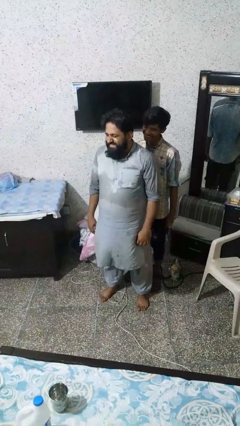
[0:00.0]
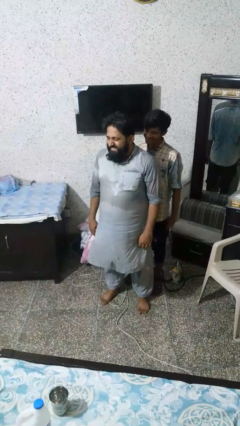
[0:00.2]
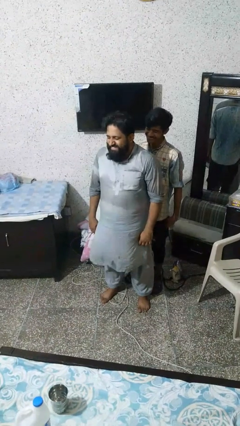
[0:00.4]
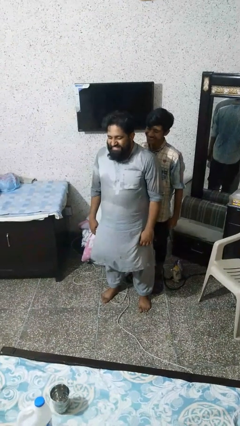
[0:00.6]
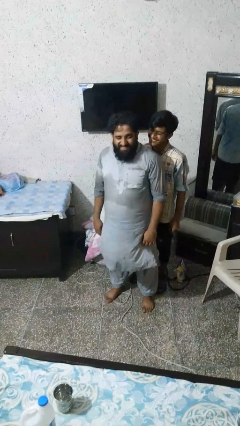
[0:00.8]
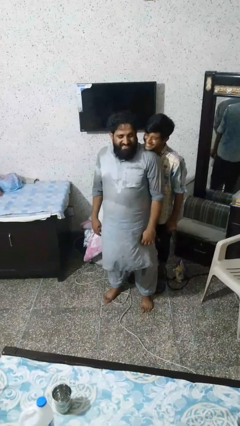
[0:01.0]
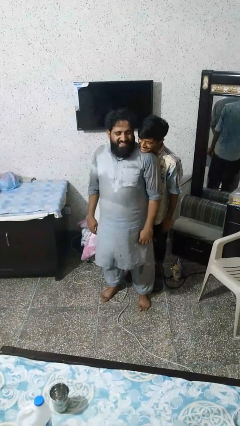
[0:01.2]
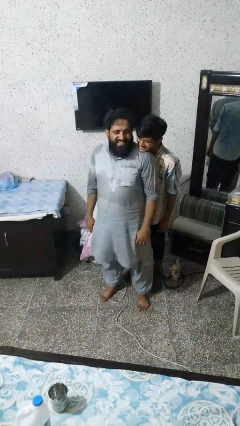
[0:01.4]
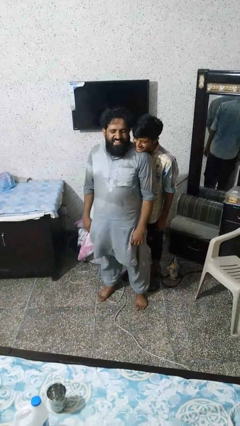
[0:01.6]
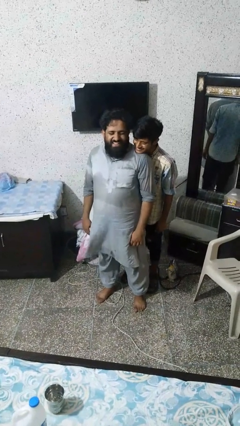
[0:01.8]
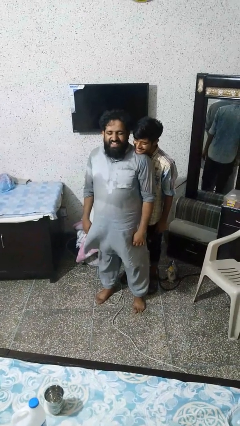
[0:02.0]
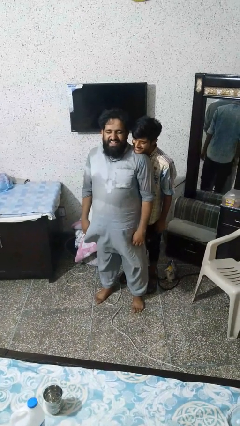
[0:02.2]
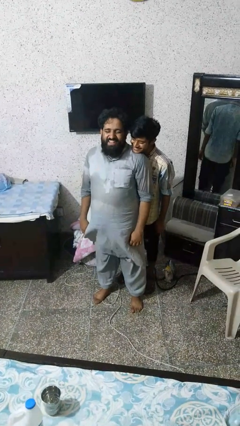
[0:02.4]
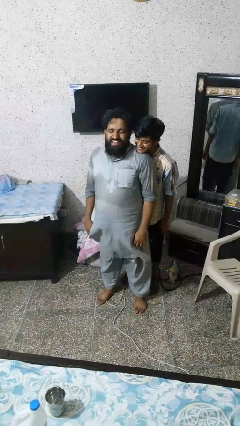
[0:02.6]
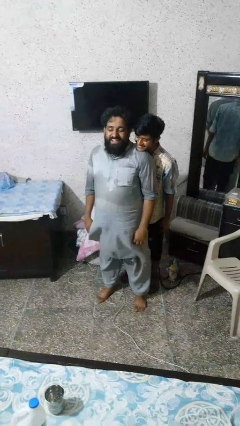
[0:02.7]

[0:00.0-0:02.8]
person looks over shoulder

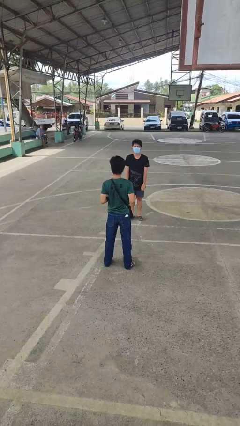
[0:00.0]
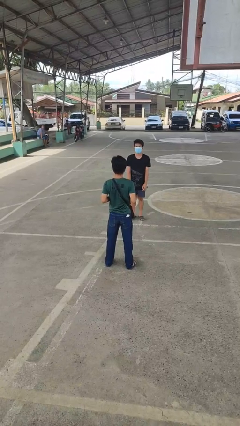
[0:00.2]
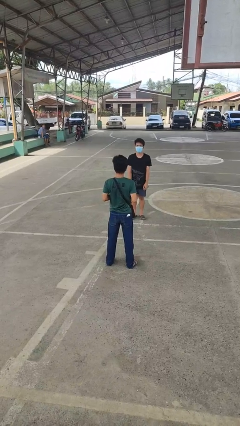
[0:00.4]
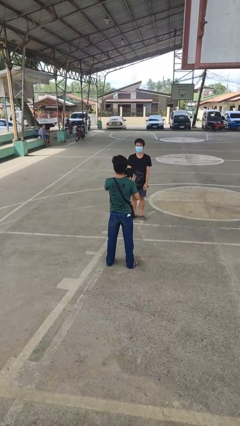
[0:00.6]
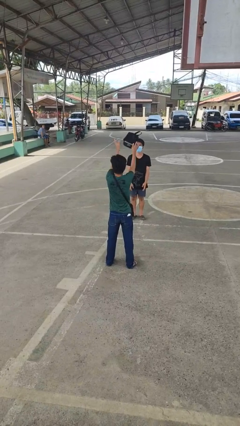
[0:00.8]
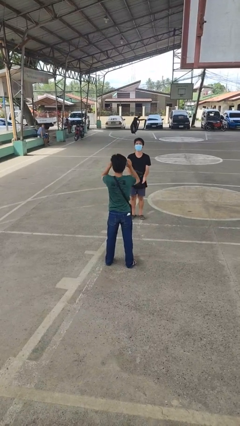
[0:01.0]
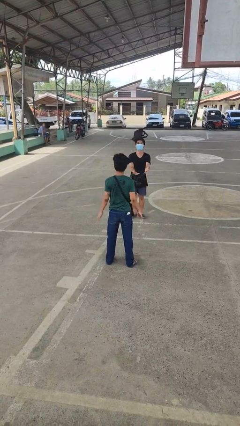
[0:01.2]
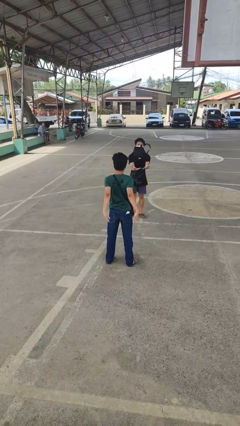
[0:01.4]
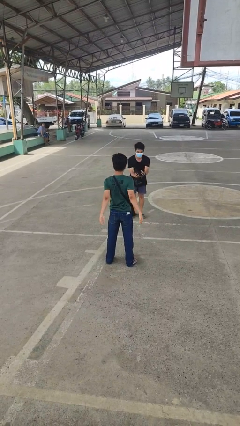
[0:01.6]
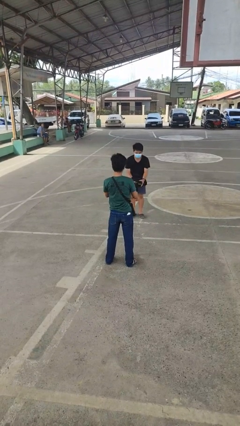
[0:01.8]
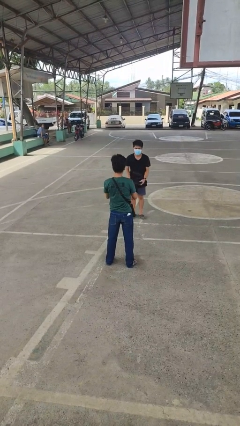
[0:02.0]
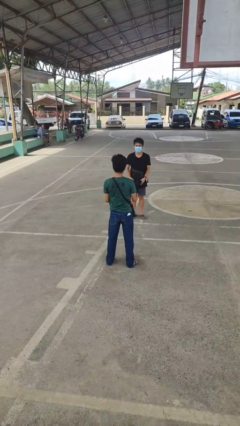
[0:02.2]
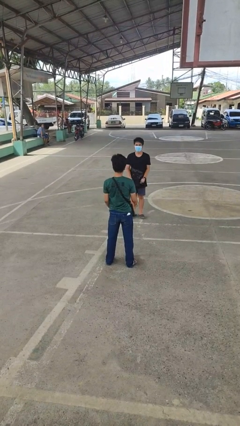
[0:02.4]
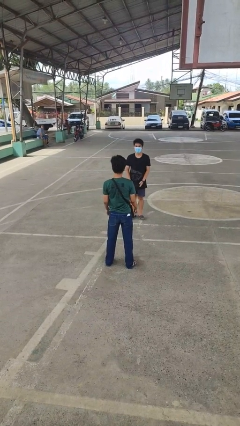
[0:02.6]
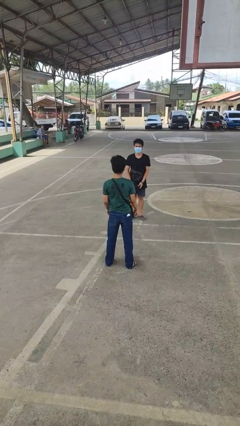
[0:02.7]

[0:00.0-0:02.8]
person throws object to person

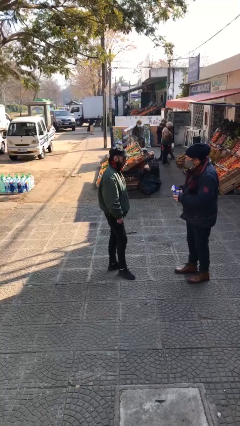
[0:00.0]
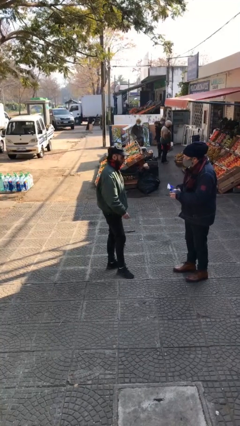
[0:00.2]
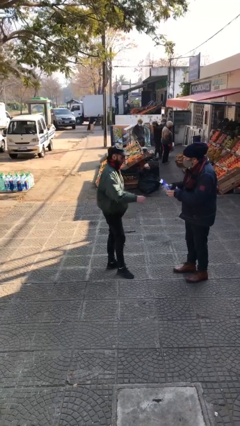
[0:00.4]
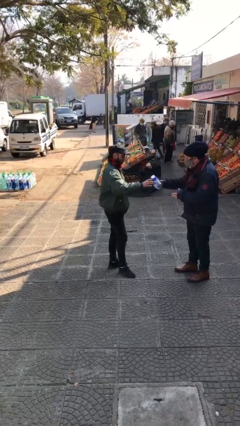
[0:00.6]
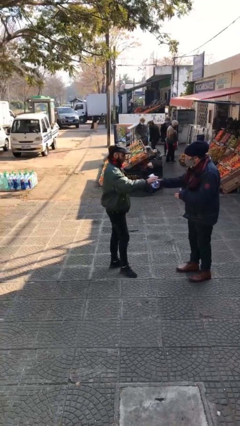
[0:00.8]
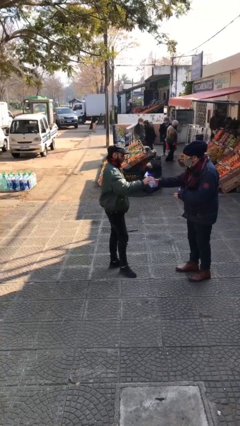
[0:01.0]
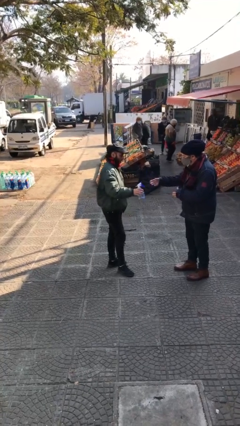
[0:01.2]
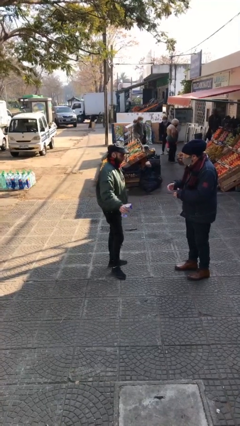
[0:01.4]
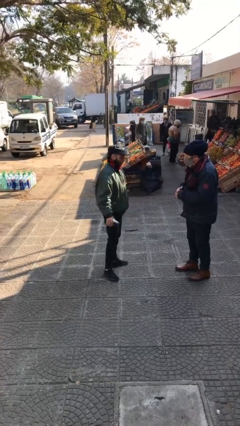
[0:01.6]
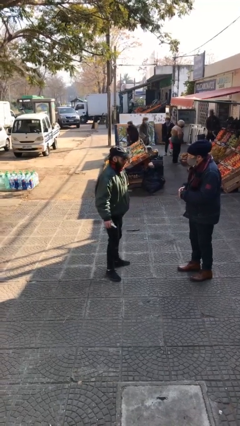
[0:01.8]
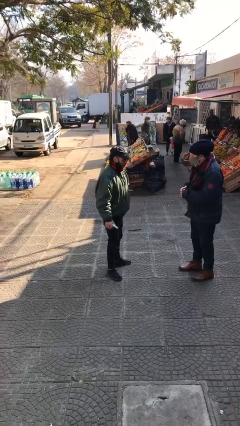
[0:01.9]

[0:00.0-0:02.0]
person transfers object to person

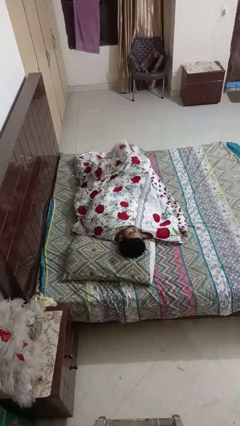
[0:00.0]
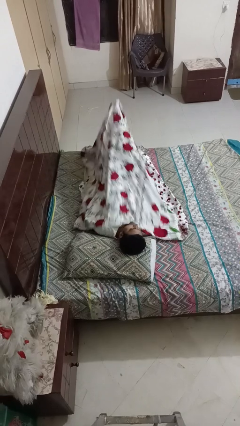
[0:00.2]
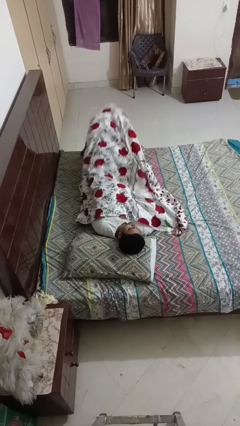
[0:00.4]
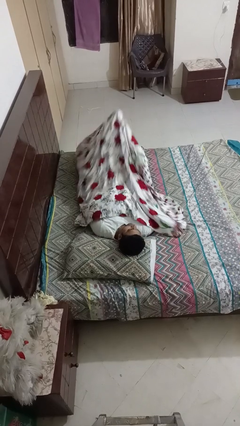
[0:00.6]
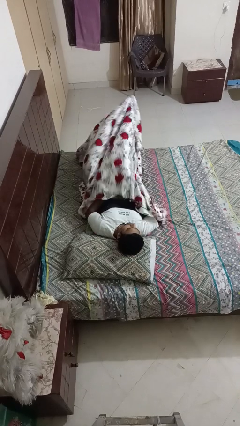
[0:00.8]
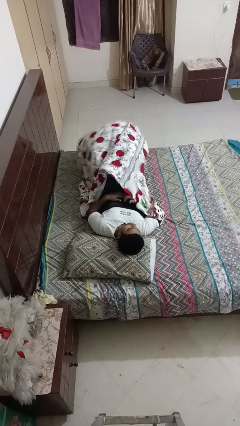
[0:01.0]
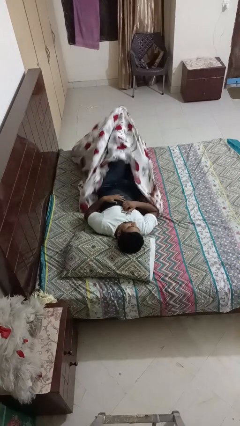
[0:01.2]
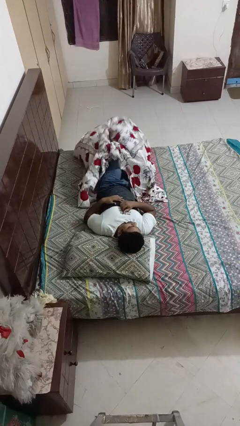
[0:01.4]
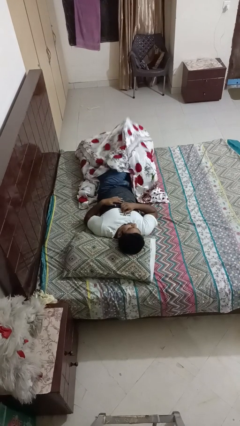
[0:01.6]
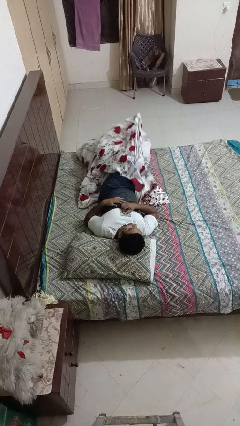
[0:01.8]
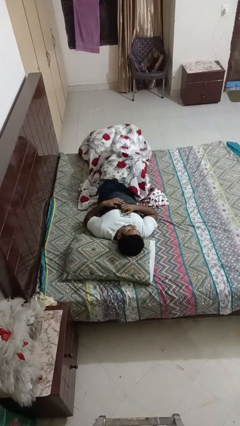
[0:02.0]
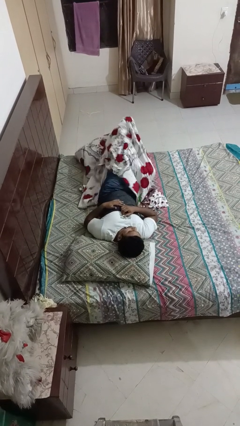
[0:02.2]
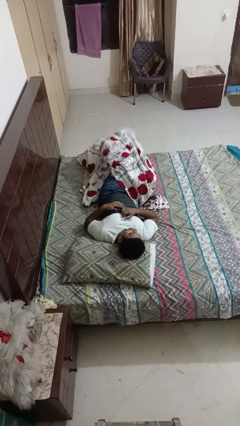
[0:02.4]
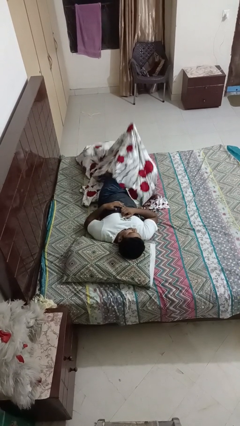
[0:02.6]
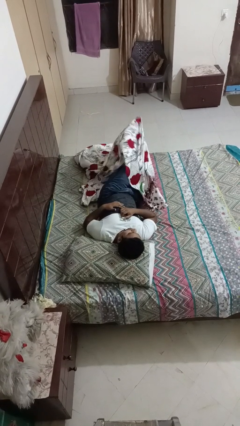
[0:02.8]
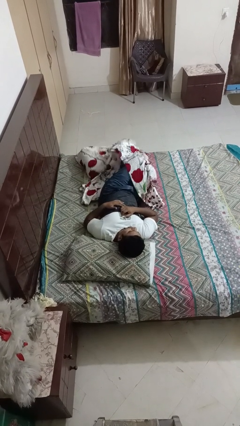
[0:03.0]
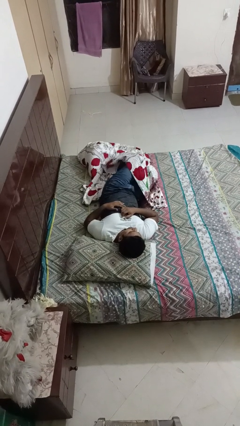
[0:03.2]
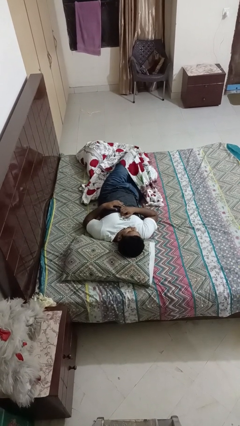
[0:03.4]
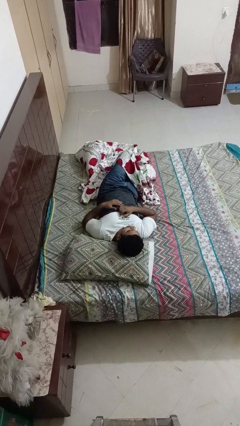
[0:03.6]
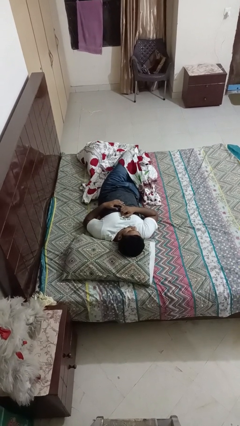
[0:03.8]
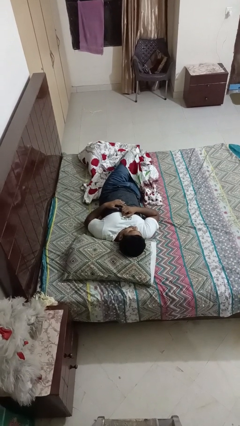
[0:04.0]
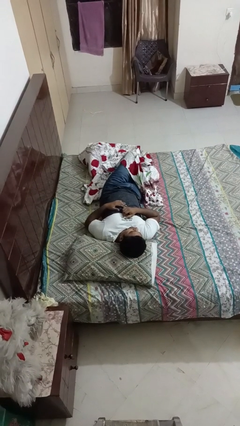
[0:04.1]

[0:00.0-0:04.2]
person uncovers with bedsheets

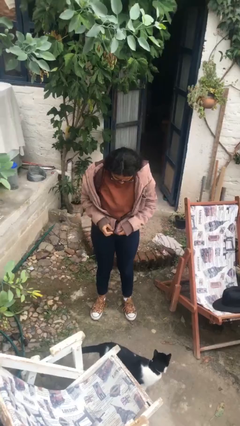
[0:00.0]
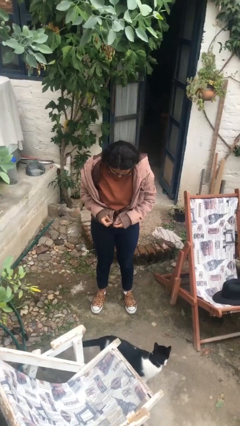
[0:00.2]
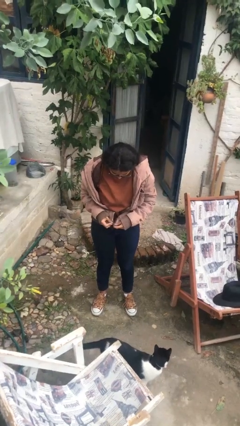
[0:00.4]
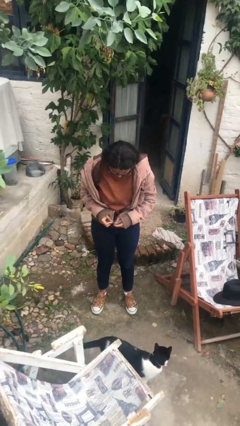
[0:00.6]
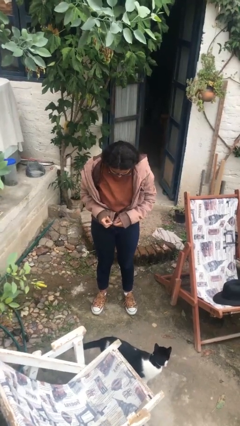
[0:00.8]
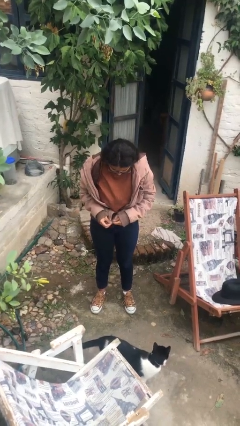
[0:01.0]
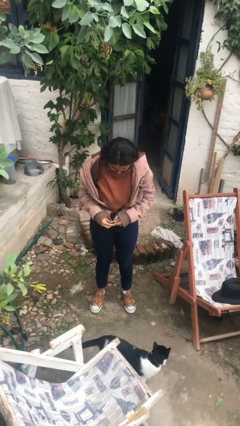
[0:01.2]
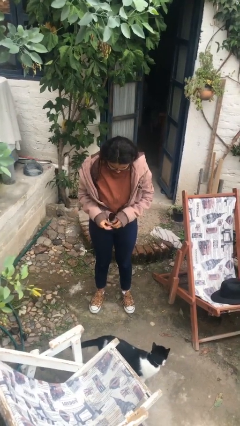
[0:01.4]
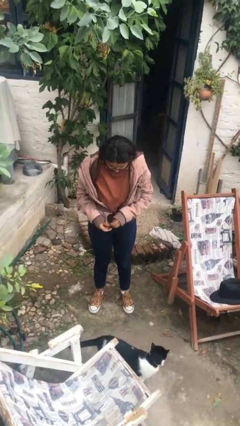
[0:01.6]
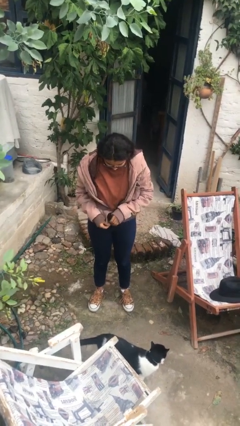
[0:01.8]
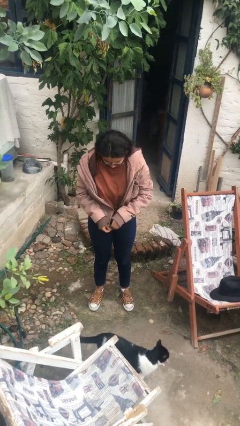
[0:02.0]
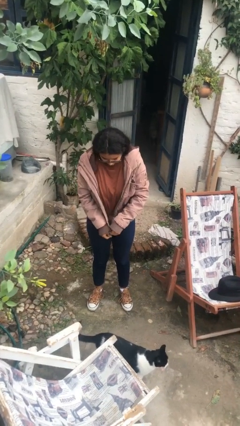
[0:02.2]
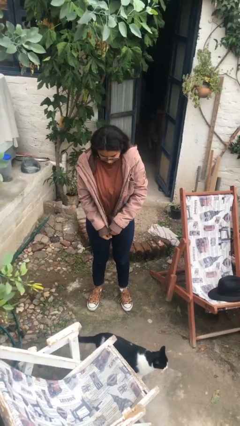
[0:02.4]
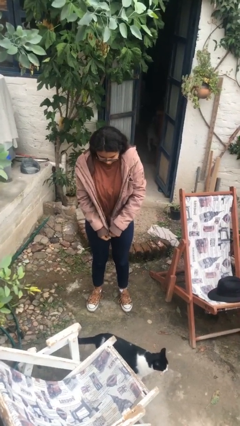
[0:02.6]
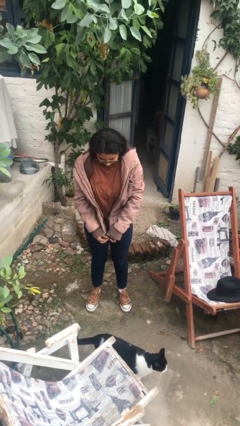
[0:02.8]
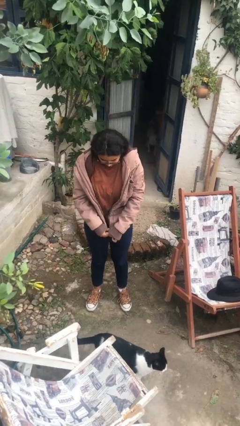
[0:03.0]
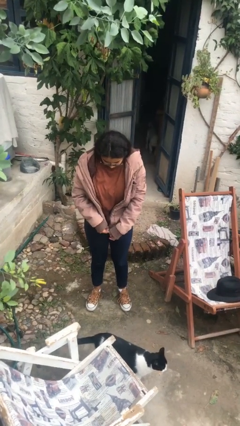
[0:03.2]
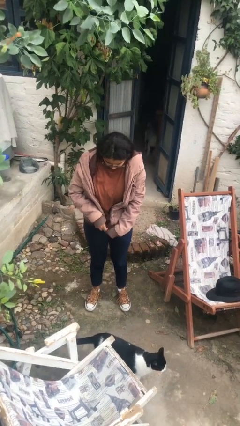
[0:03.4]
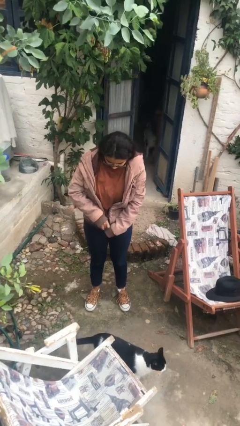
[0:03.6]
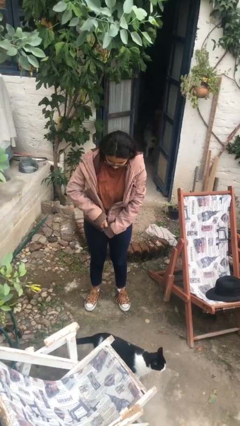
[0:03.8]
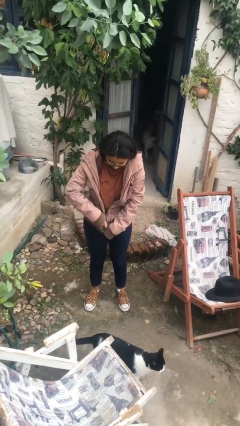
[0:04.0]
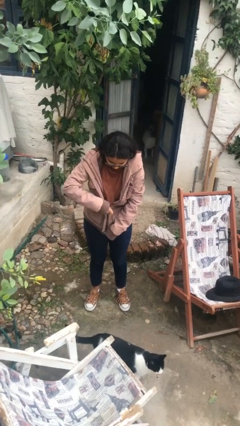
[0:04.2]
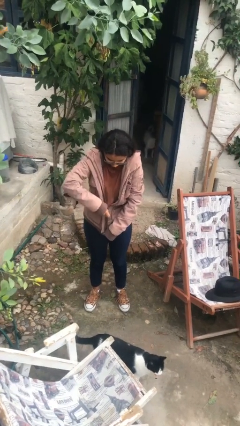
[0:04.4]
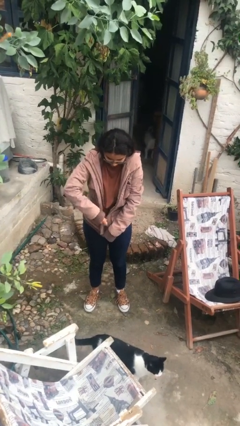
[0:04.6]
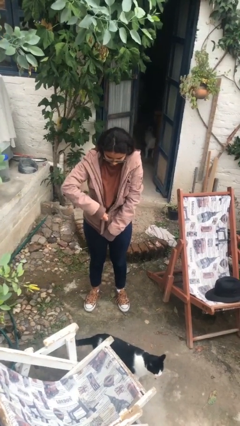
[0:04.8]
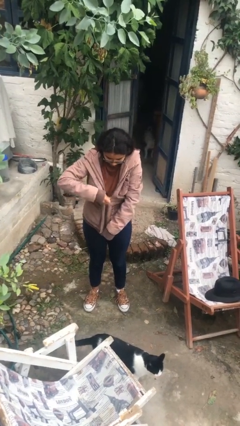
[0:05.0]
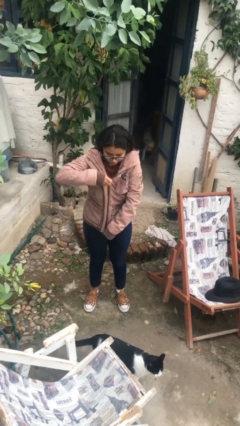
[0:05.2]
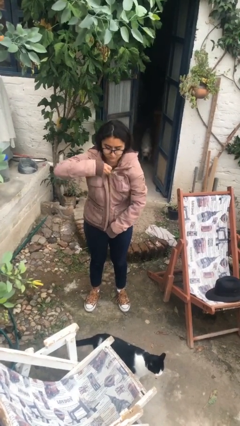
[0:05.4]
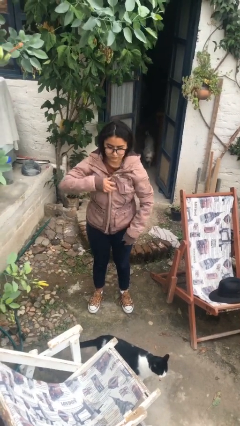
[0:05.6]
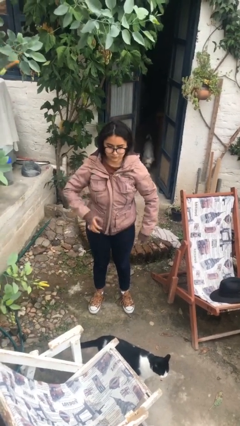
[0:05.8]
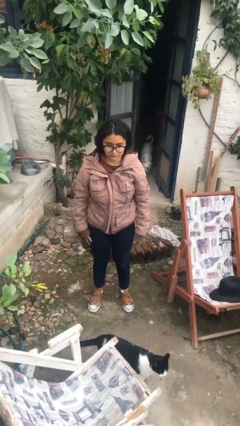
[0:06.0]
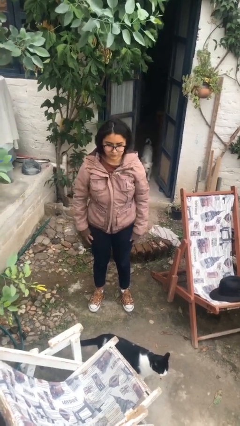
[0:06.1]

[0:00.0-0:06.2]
person zips up jacket
